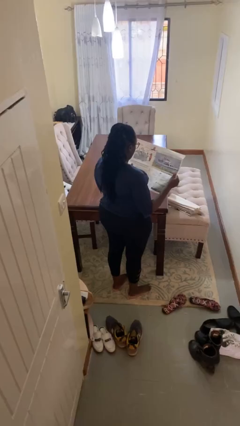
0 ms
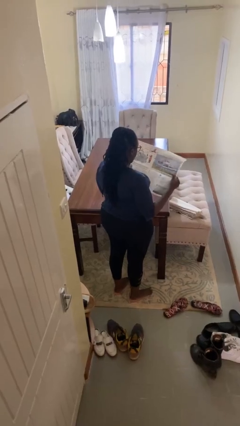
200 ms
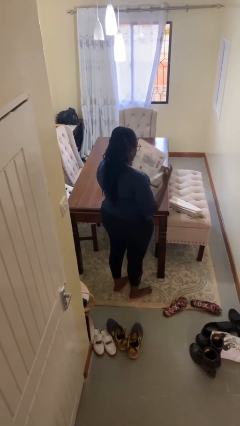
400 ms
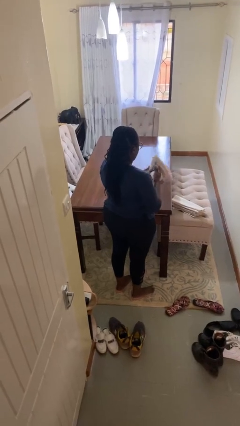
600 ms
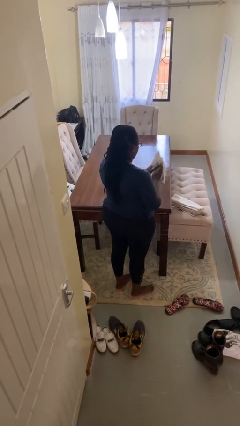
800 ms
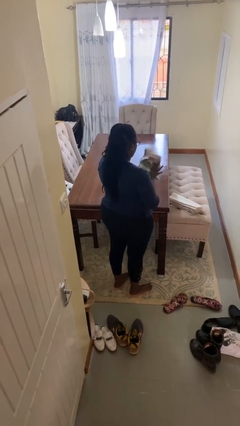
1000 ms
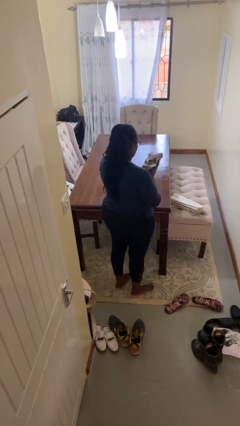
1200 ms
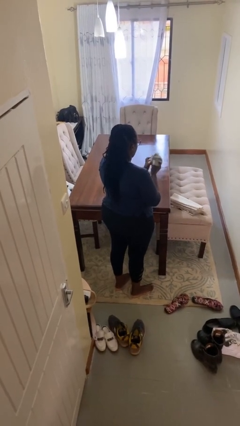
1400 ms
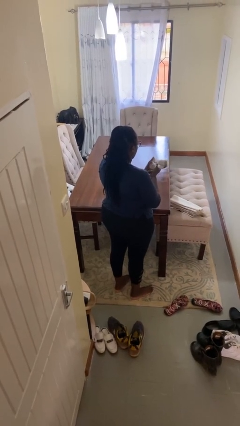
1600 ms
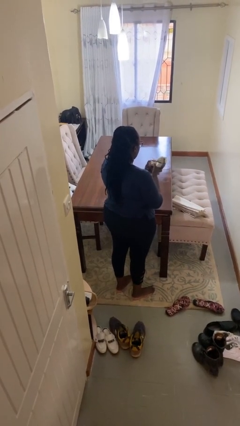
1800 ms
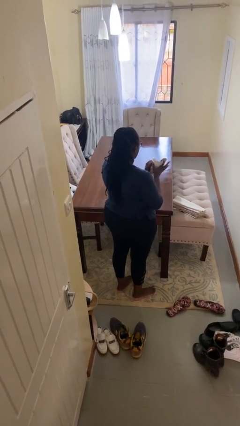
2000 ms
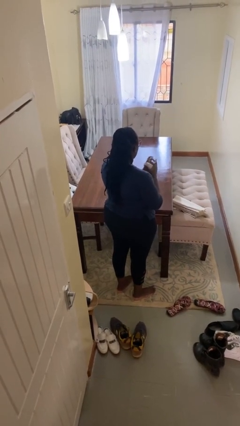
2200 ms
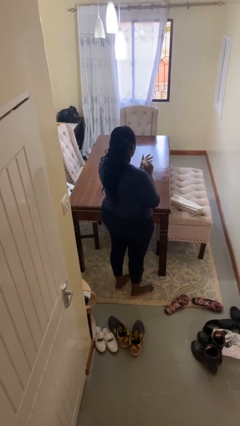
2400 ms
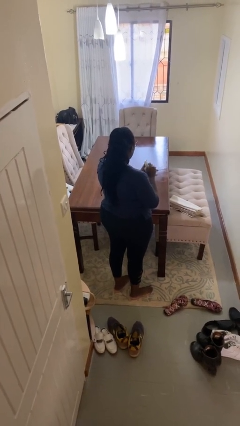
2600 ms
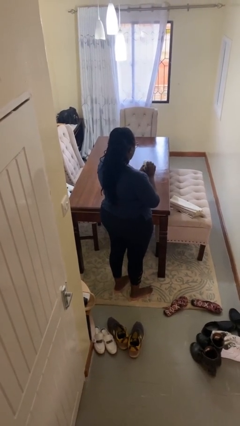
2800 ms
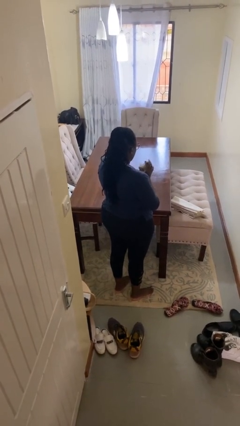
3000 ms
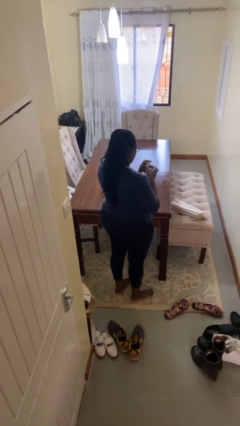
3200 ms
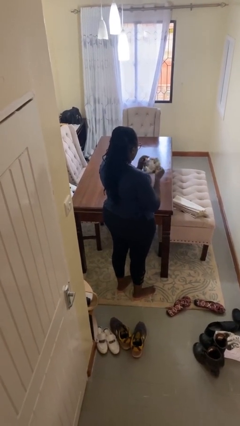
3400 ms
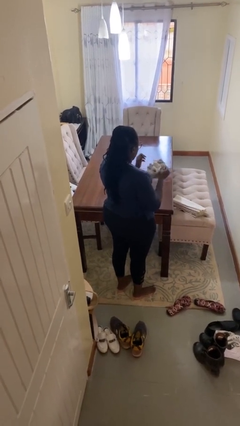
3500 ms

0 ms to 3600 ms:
person crumples paper

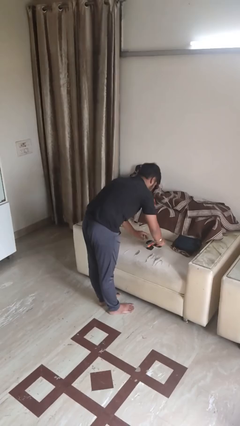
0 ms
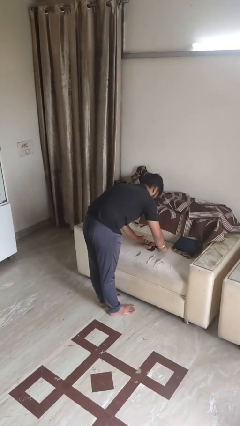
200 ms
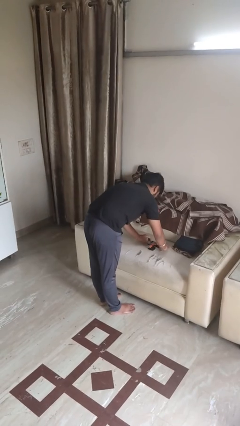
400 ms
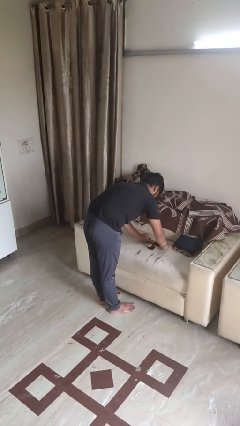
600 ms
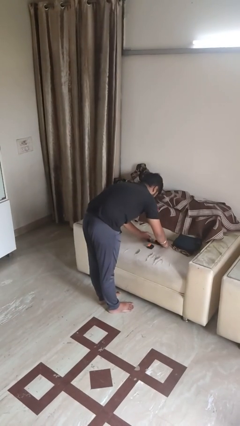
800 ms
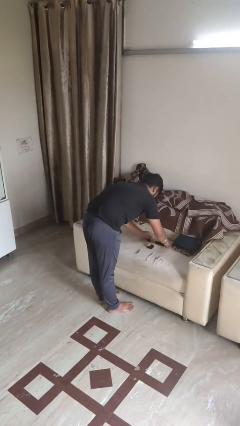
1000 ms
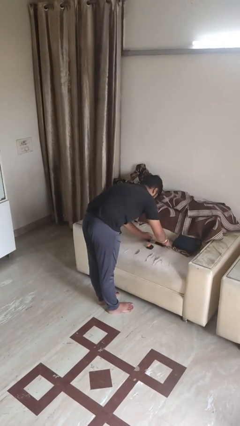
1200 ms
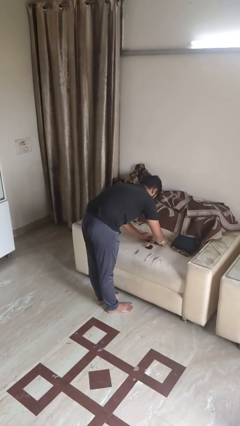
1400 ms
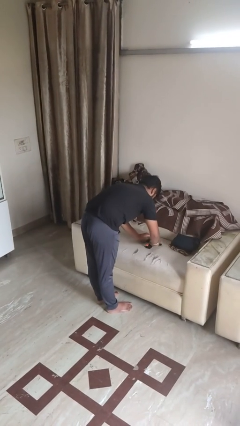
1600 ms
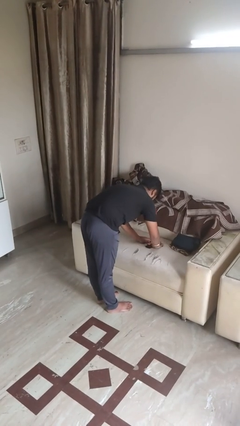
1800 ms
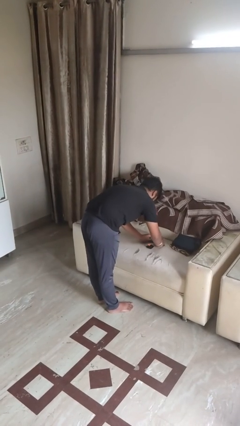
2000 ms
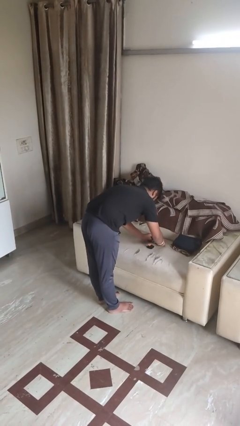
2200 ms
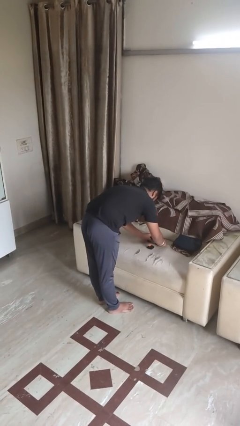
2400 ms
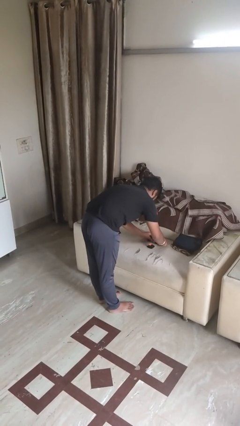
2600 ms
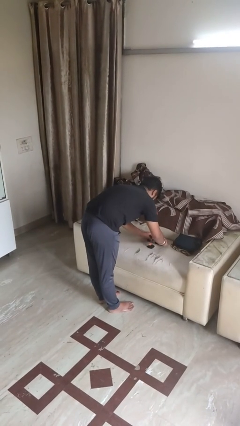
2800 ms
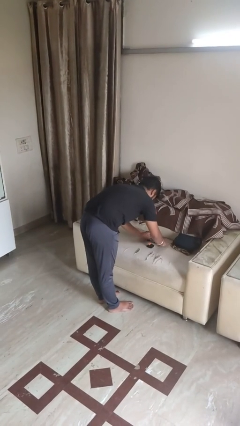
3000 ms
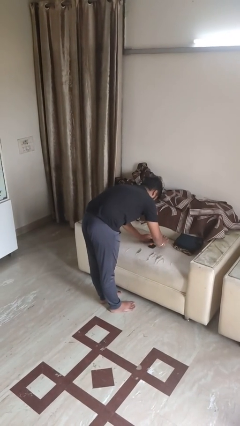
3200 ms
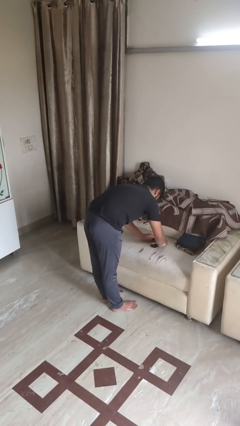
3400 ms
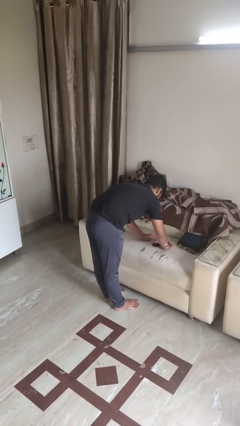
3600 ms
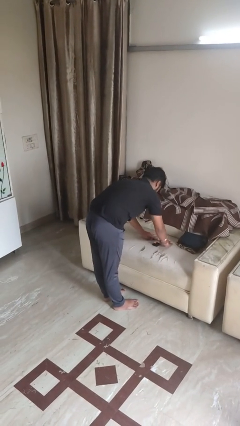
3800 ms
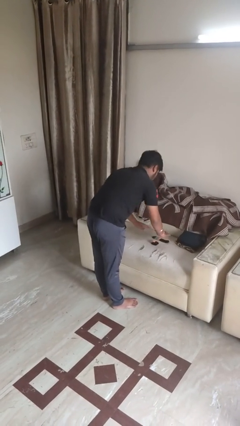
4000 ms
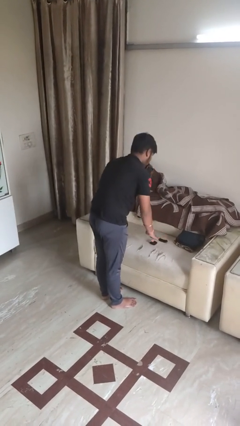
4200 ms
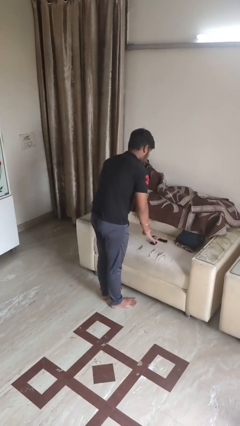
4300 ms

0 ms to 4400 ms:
person folds socks

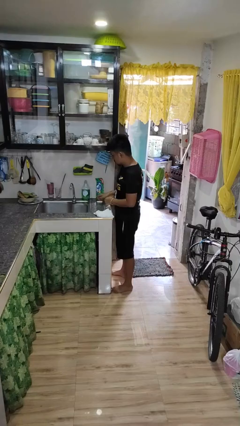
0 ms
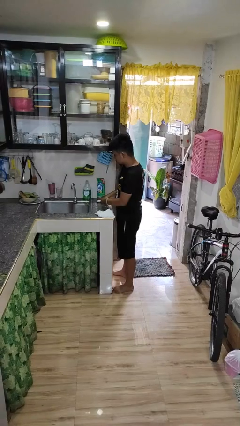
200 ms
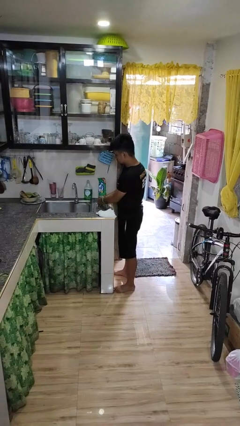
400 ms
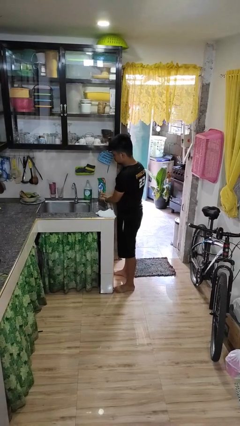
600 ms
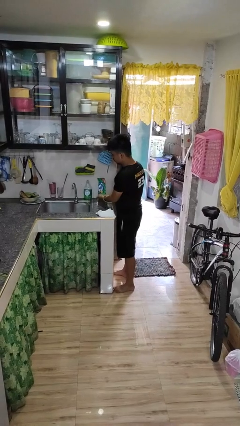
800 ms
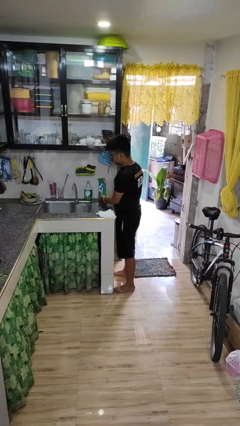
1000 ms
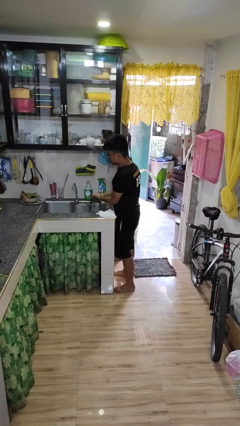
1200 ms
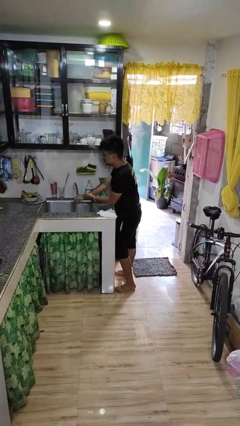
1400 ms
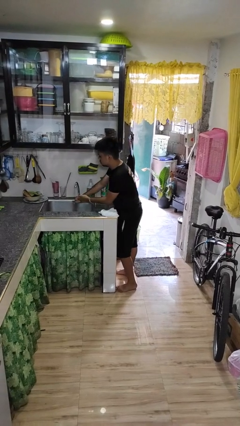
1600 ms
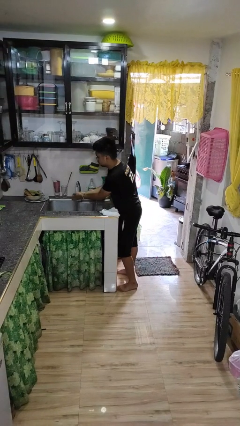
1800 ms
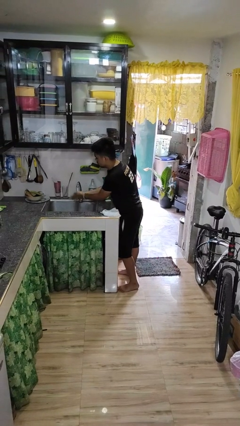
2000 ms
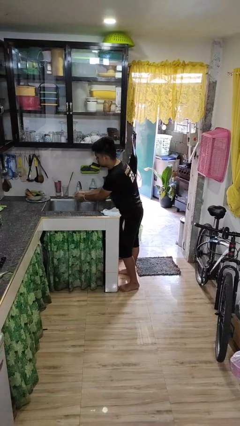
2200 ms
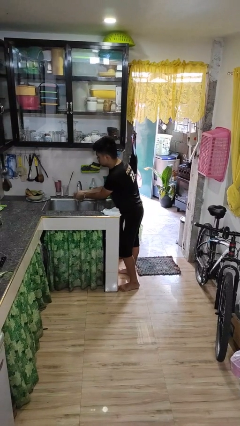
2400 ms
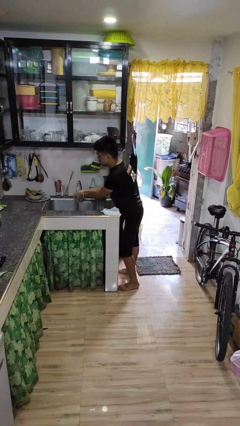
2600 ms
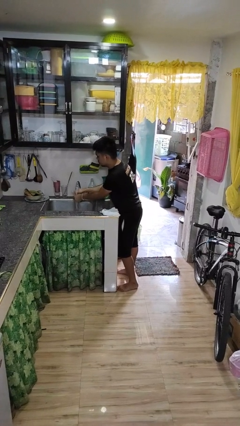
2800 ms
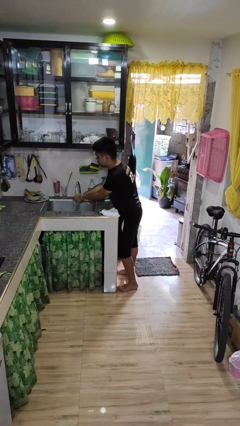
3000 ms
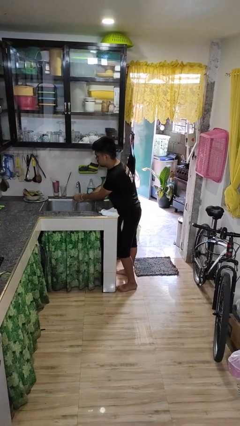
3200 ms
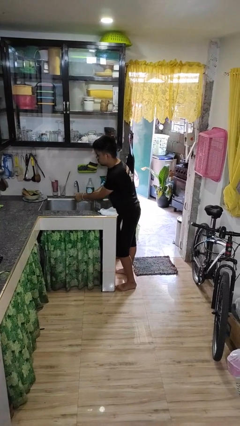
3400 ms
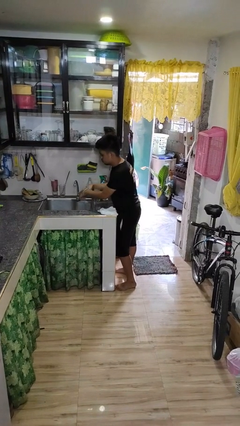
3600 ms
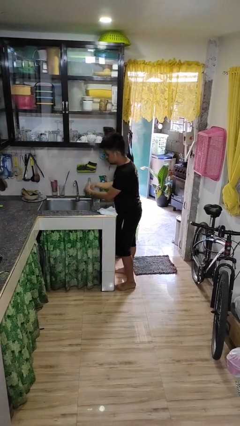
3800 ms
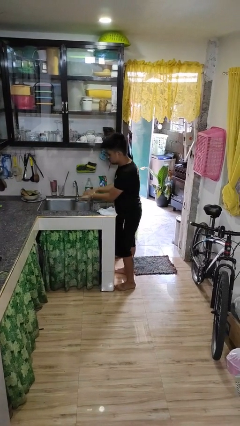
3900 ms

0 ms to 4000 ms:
person washes hands

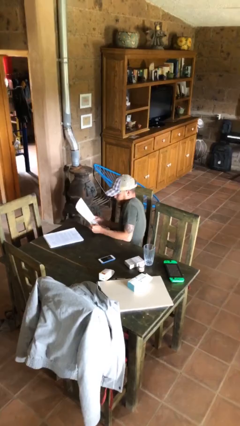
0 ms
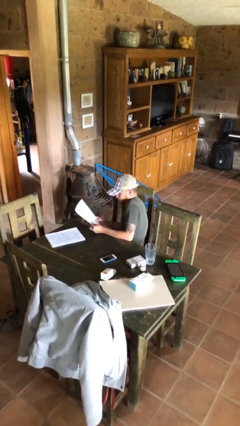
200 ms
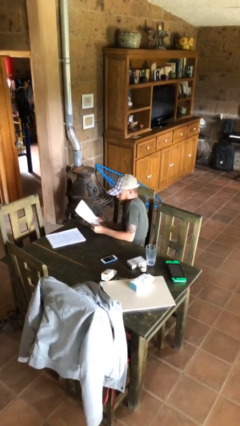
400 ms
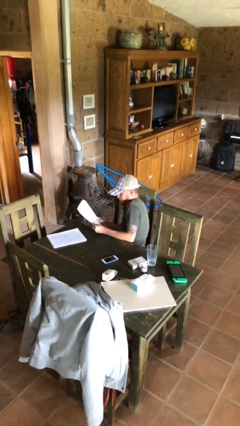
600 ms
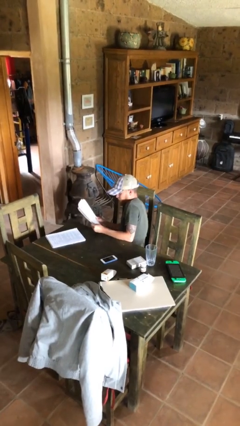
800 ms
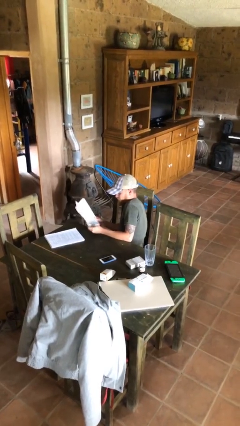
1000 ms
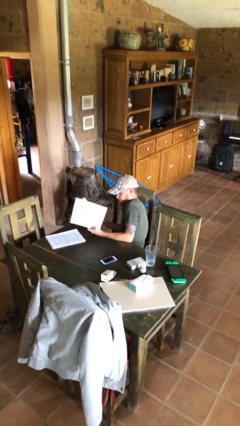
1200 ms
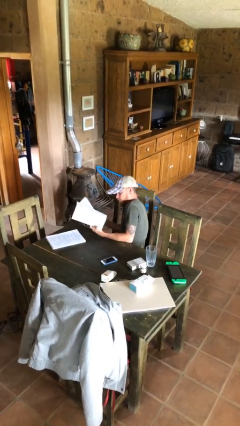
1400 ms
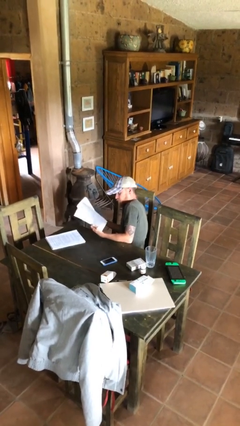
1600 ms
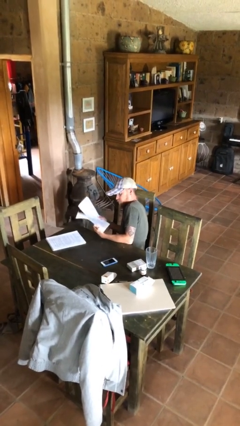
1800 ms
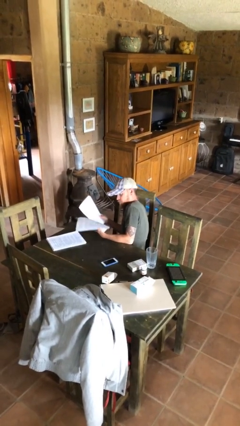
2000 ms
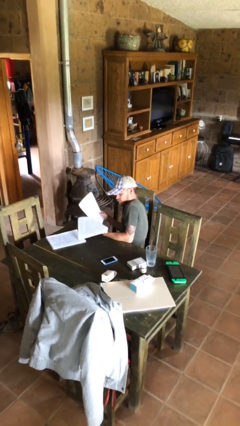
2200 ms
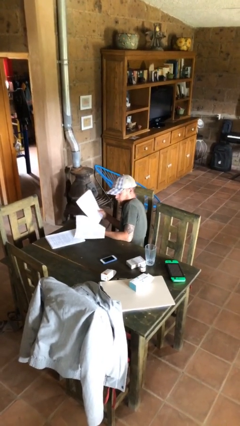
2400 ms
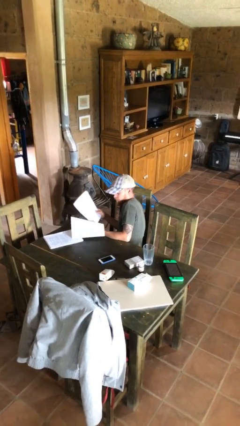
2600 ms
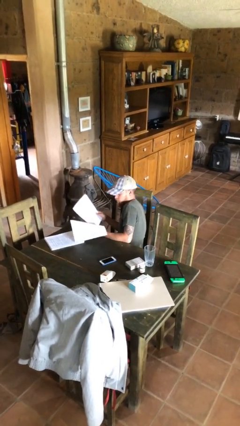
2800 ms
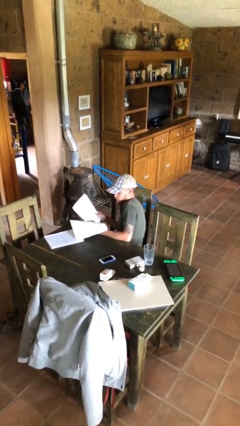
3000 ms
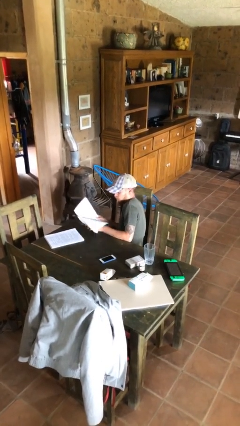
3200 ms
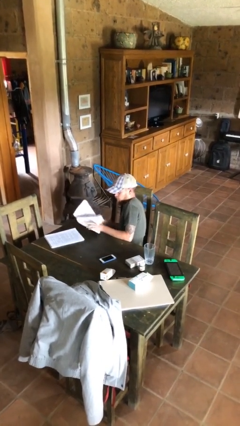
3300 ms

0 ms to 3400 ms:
person reads document

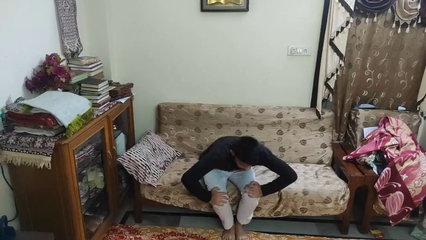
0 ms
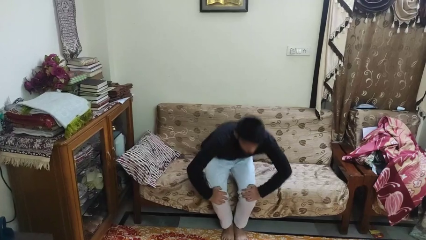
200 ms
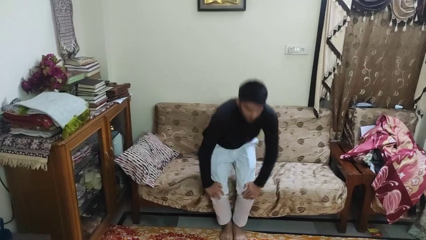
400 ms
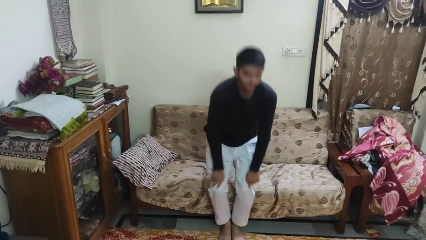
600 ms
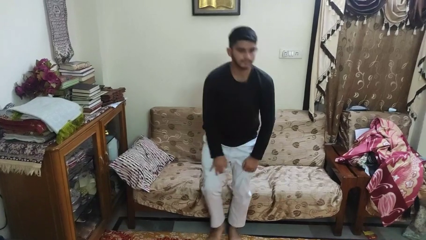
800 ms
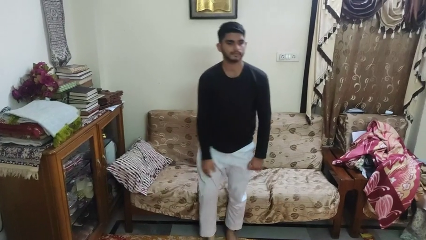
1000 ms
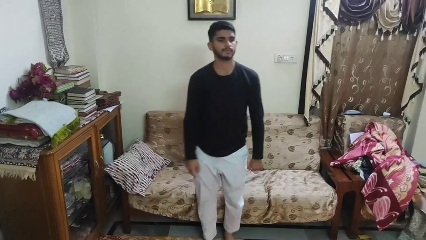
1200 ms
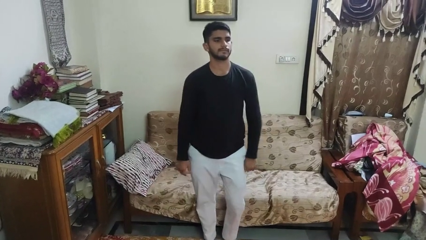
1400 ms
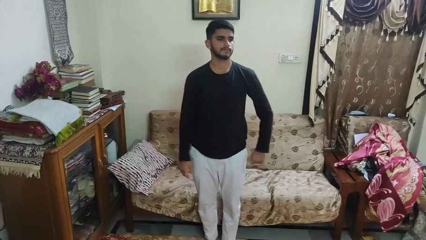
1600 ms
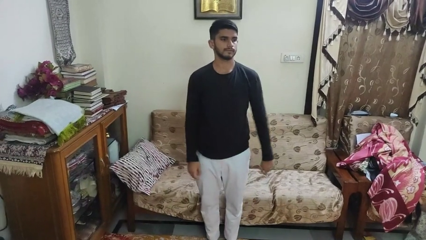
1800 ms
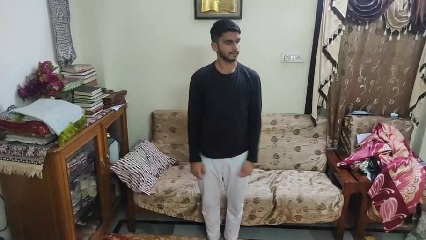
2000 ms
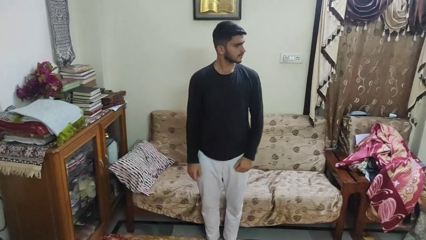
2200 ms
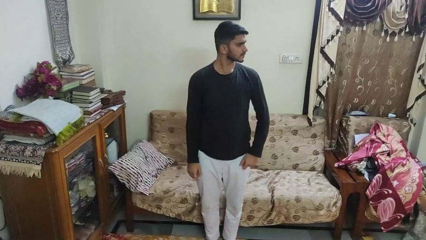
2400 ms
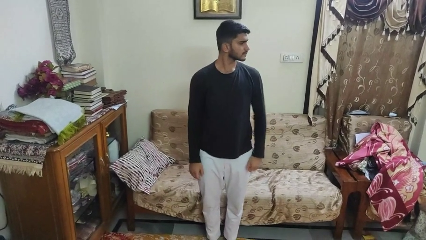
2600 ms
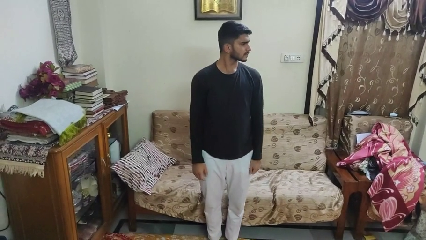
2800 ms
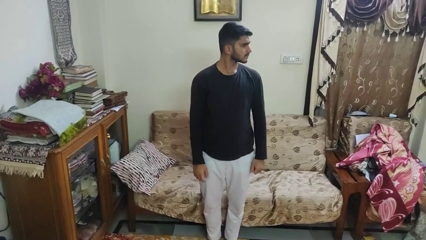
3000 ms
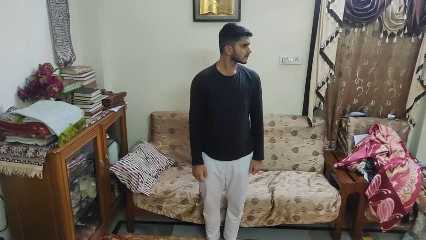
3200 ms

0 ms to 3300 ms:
person stands up
